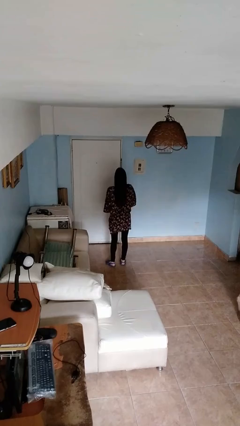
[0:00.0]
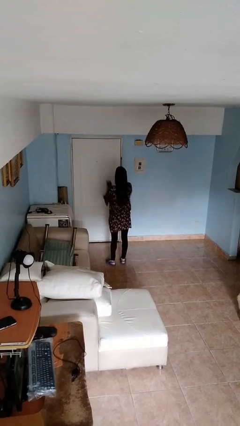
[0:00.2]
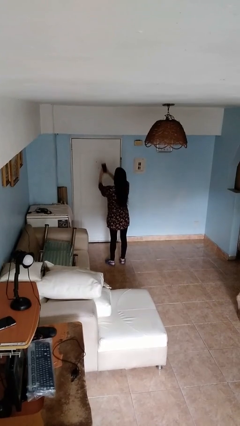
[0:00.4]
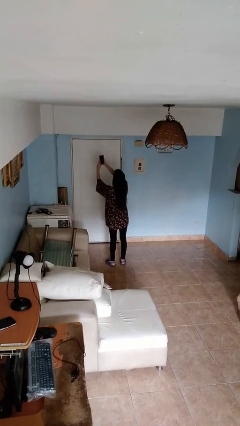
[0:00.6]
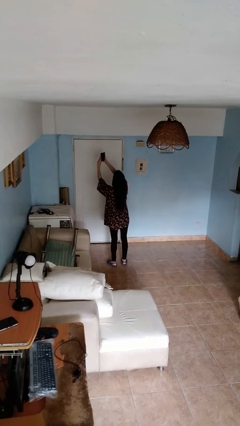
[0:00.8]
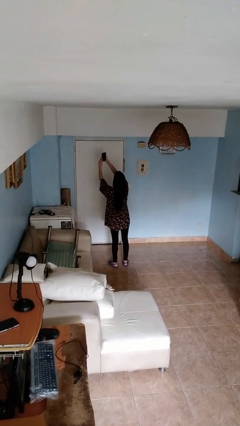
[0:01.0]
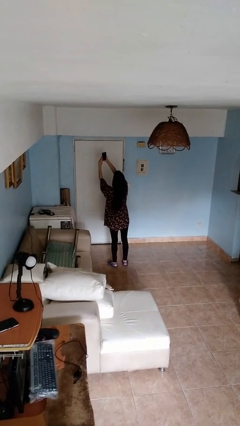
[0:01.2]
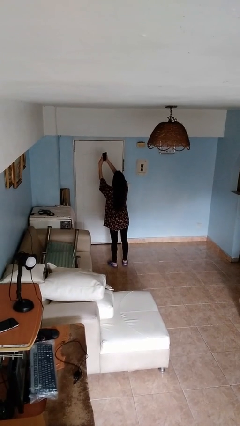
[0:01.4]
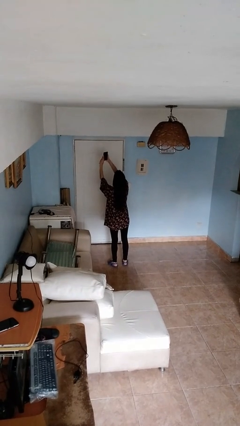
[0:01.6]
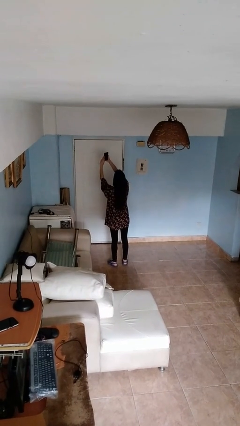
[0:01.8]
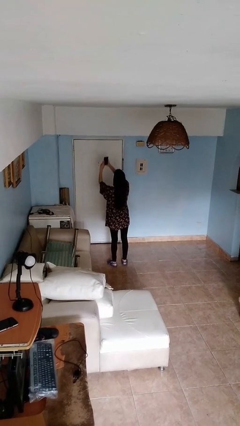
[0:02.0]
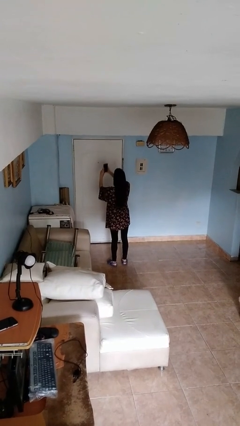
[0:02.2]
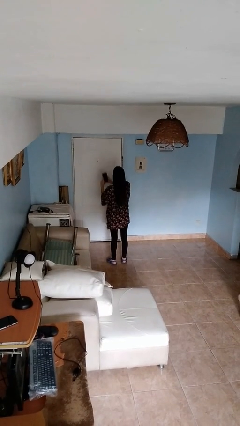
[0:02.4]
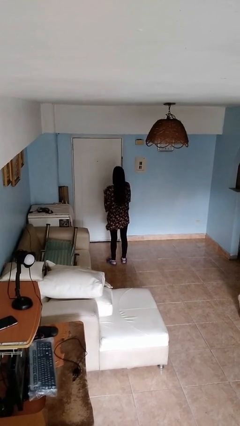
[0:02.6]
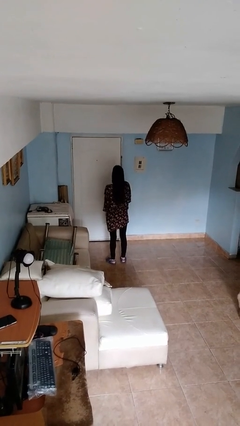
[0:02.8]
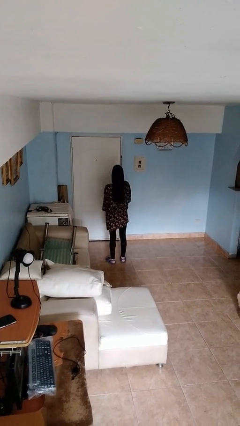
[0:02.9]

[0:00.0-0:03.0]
person takes selfie

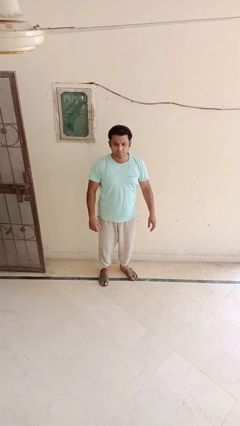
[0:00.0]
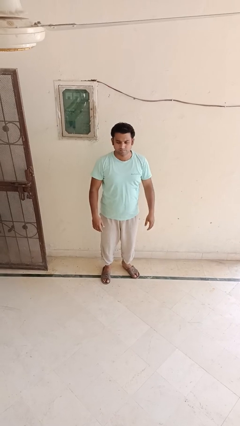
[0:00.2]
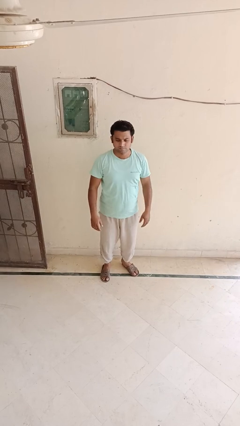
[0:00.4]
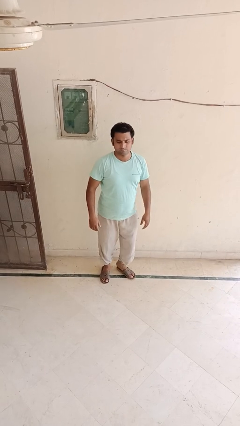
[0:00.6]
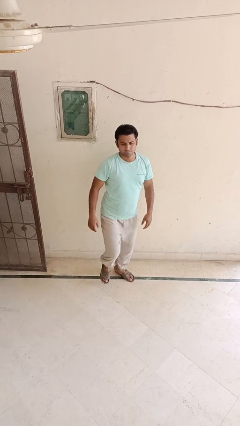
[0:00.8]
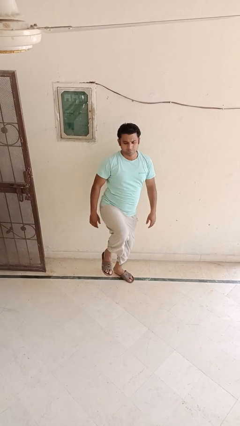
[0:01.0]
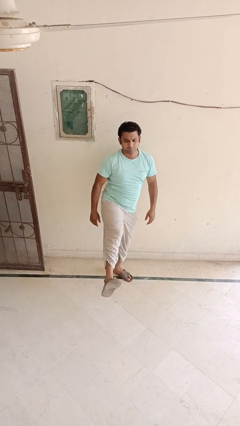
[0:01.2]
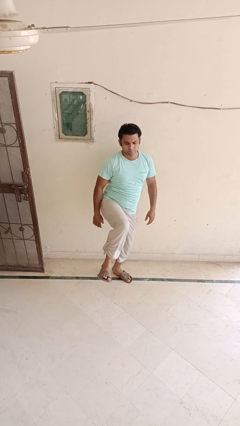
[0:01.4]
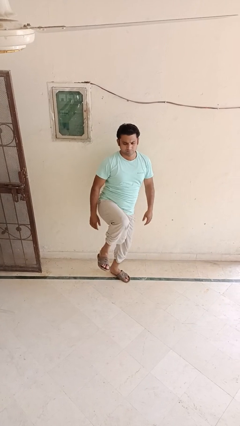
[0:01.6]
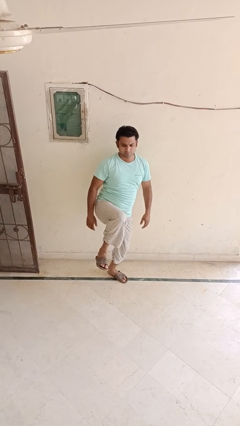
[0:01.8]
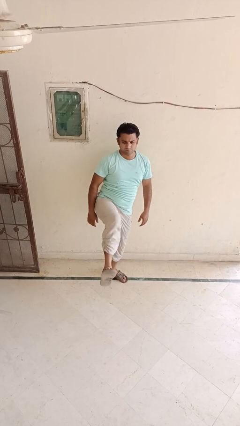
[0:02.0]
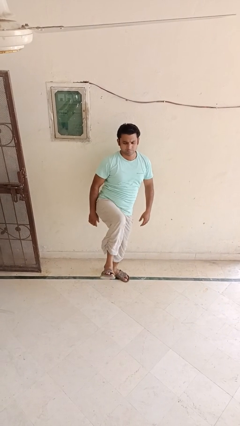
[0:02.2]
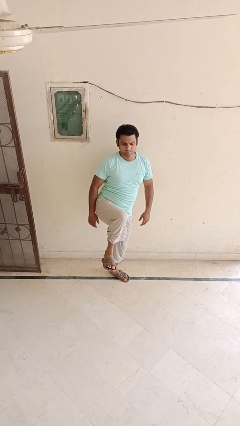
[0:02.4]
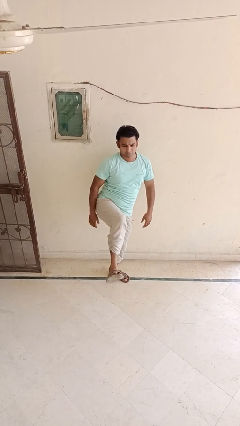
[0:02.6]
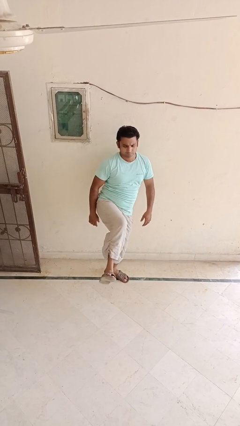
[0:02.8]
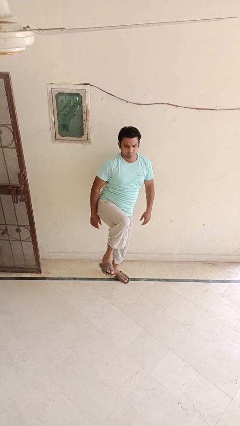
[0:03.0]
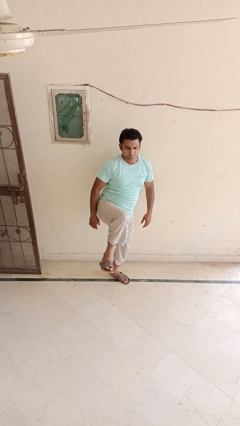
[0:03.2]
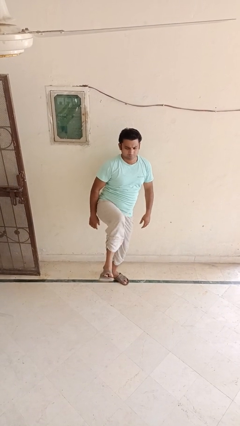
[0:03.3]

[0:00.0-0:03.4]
person karate kicks

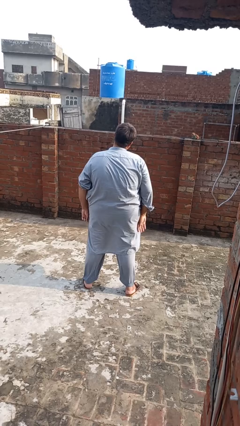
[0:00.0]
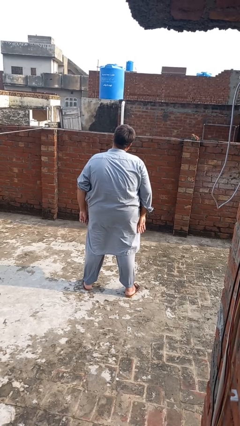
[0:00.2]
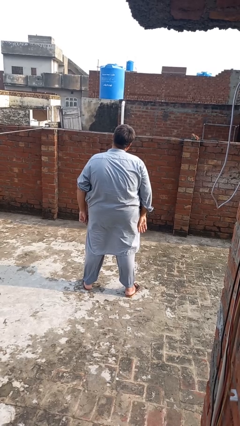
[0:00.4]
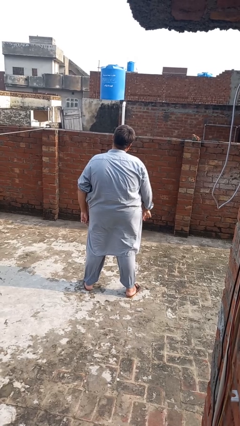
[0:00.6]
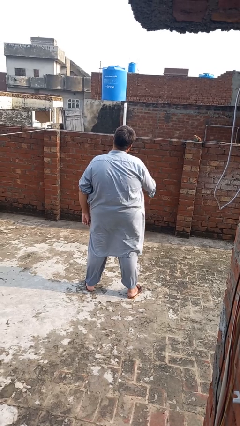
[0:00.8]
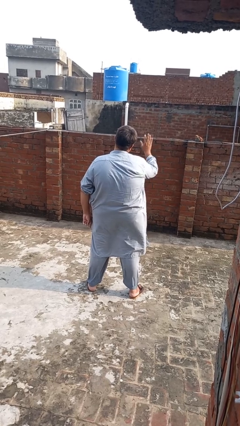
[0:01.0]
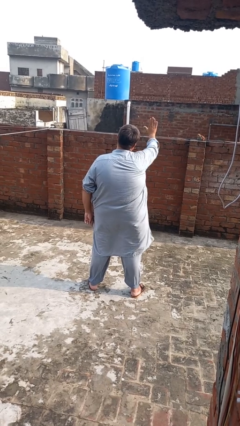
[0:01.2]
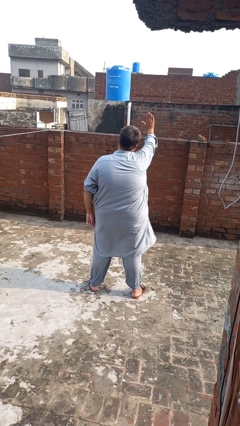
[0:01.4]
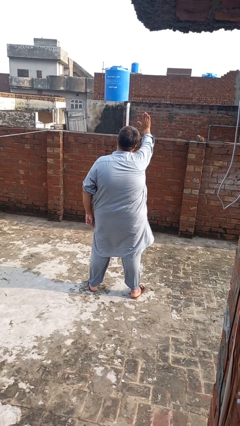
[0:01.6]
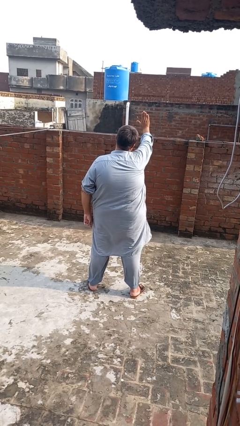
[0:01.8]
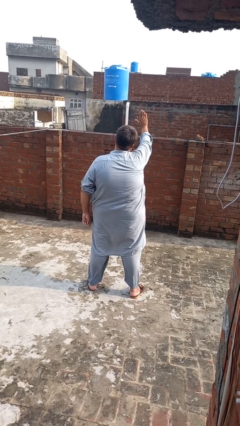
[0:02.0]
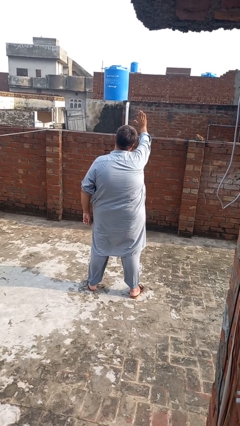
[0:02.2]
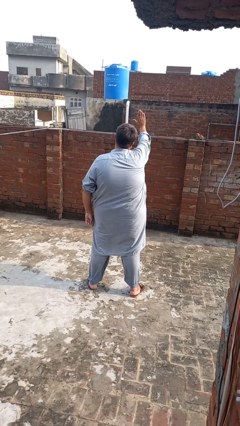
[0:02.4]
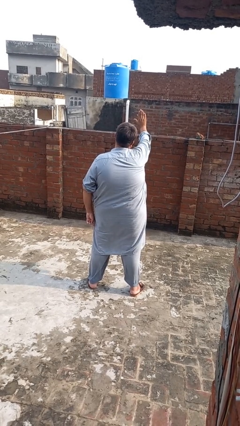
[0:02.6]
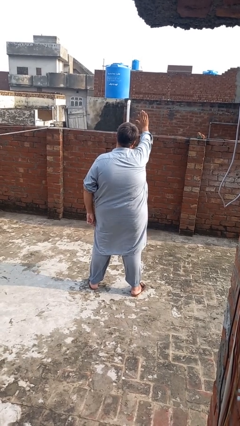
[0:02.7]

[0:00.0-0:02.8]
person gestures stop

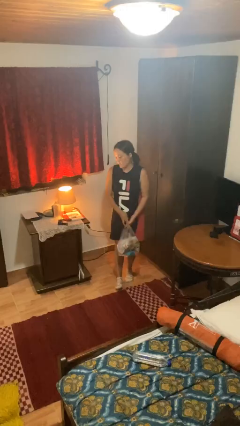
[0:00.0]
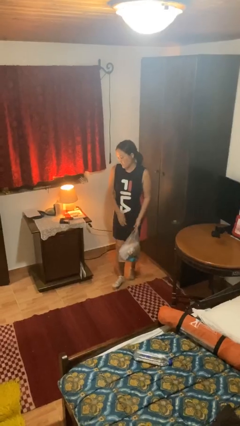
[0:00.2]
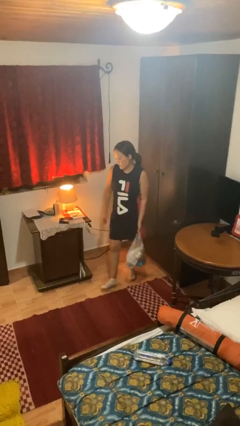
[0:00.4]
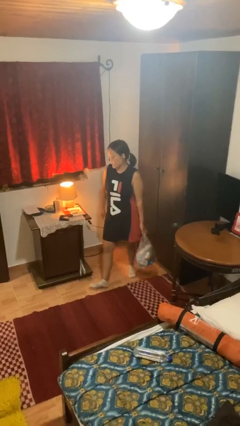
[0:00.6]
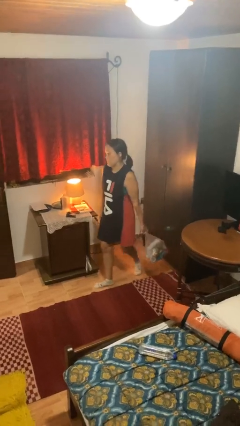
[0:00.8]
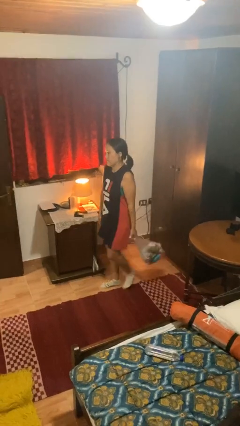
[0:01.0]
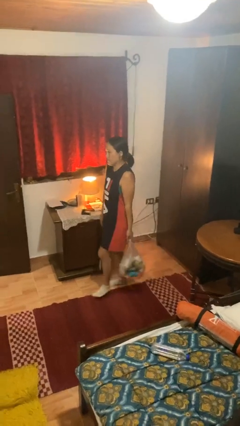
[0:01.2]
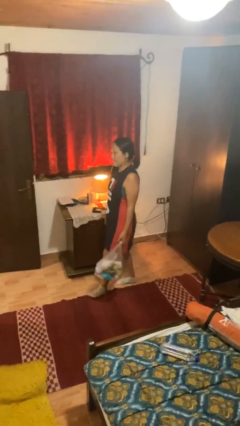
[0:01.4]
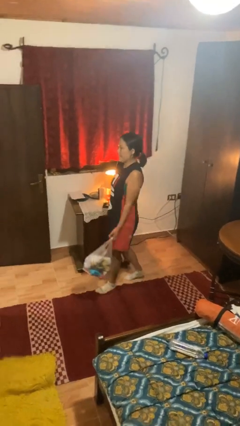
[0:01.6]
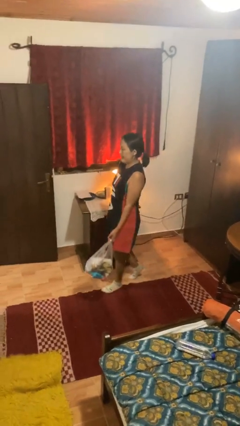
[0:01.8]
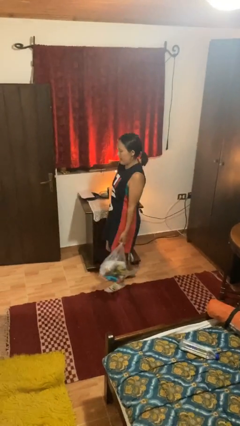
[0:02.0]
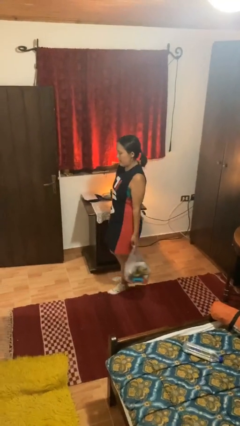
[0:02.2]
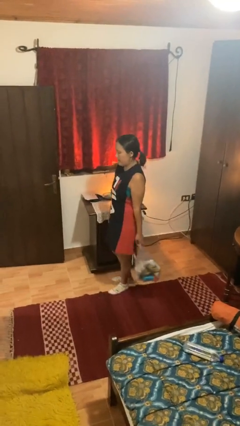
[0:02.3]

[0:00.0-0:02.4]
person carries groceries

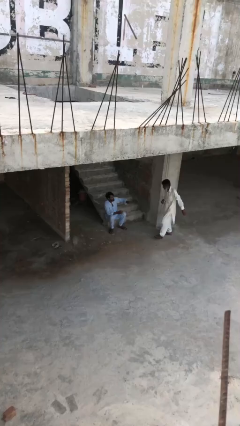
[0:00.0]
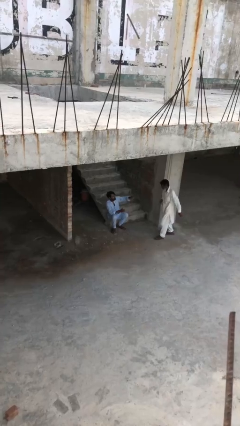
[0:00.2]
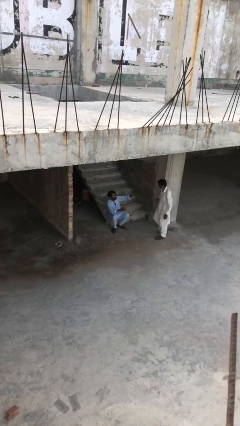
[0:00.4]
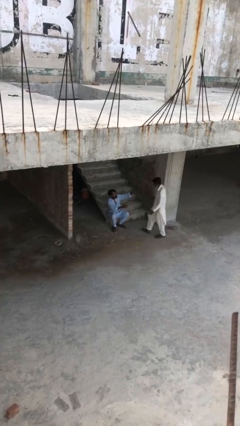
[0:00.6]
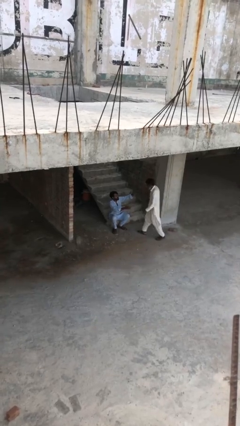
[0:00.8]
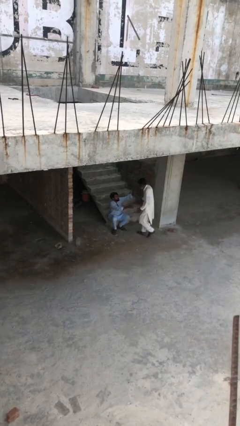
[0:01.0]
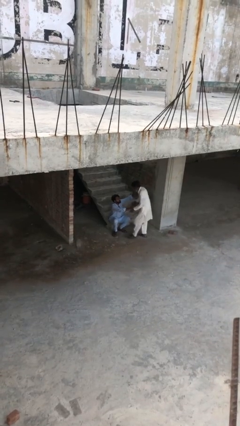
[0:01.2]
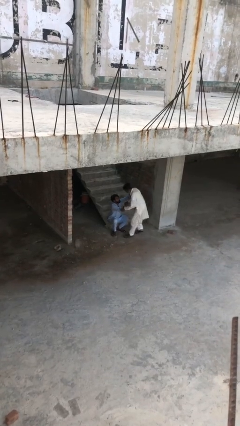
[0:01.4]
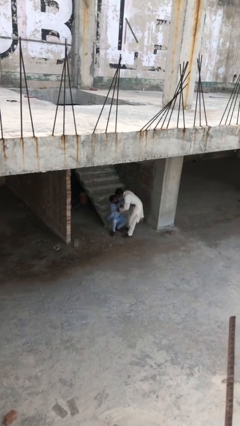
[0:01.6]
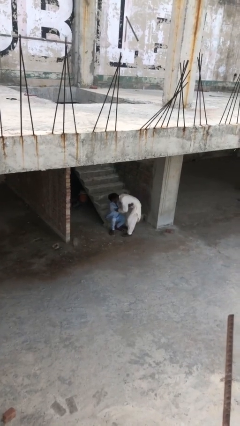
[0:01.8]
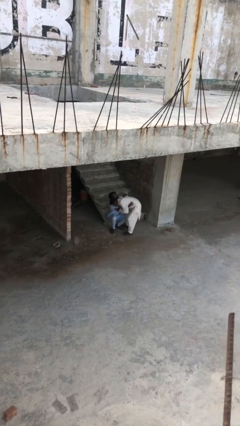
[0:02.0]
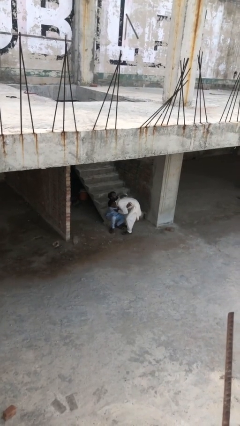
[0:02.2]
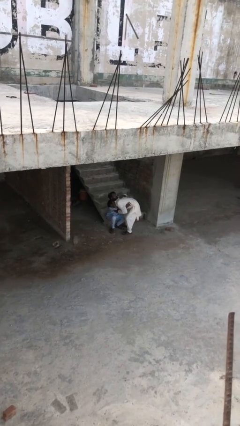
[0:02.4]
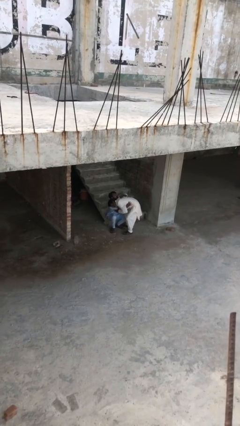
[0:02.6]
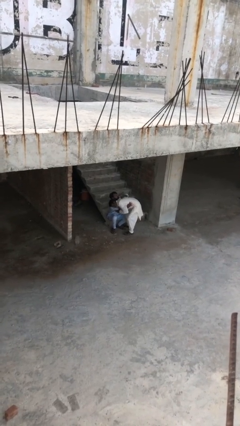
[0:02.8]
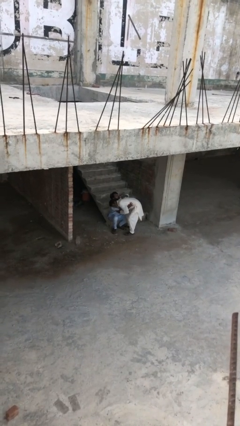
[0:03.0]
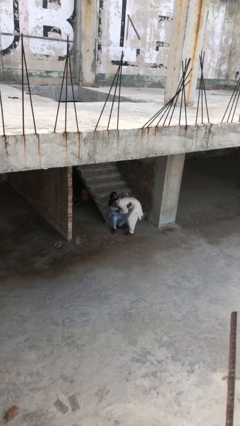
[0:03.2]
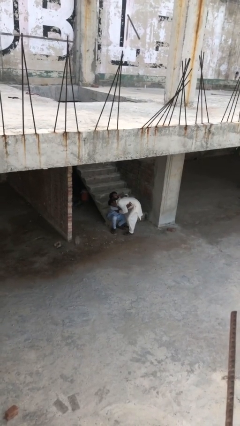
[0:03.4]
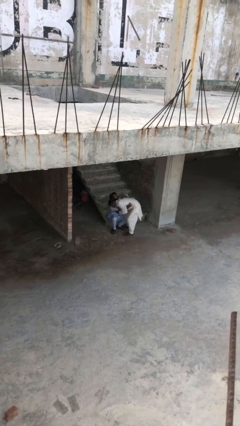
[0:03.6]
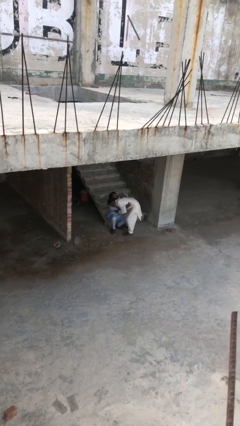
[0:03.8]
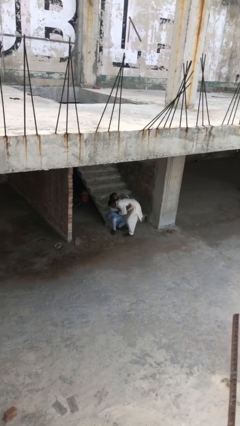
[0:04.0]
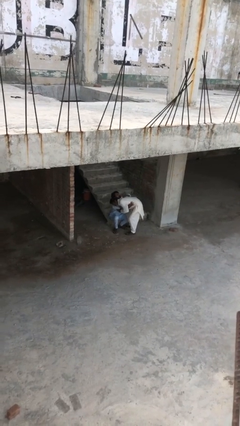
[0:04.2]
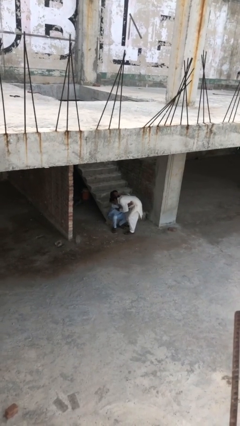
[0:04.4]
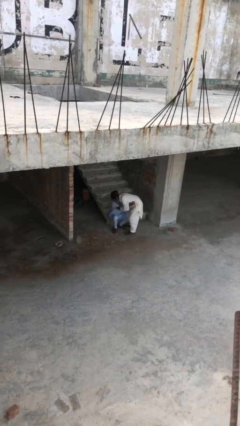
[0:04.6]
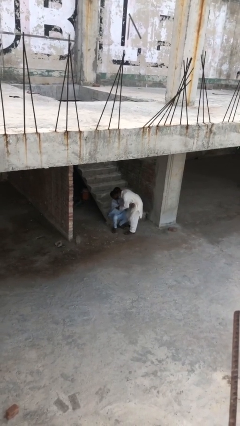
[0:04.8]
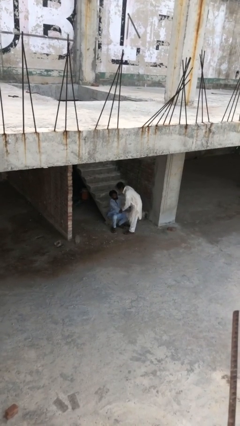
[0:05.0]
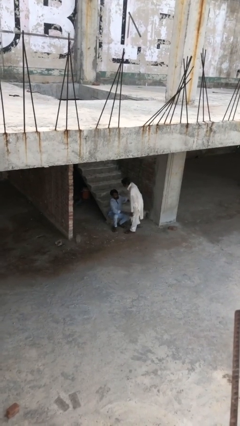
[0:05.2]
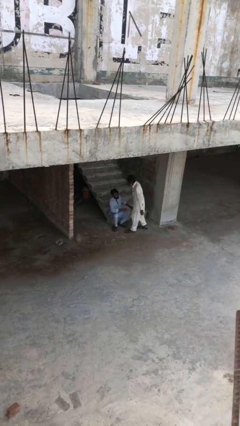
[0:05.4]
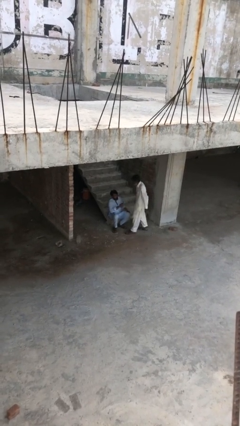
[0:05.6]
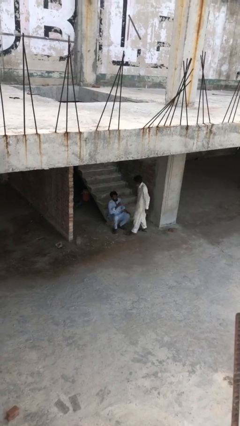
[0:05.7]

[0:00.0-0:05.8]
person embraces person

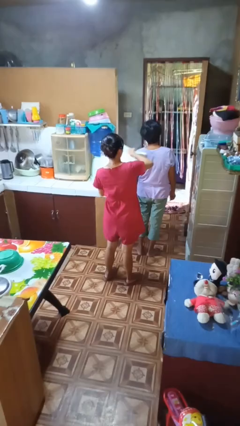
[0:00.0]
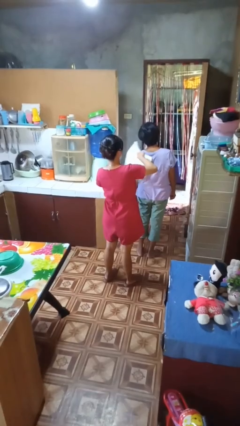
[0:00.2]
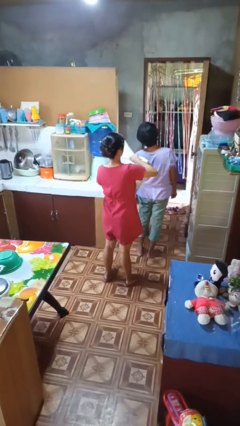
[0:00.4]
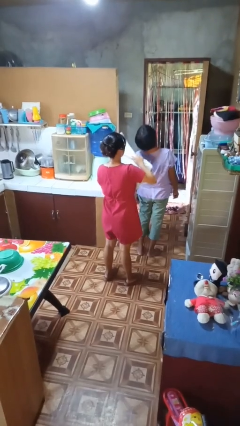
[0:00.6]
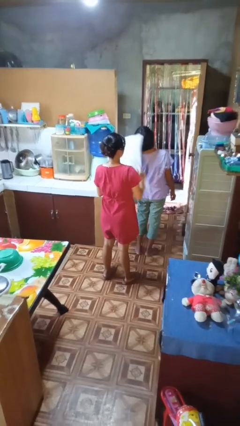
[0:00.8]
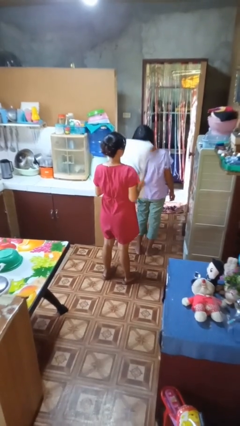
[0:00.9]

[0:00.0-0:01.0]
person hits person with pillow
